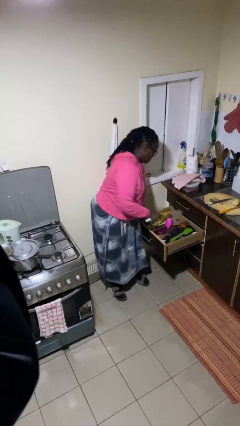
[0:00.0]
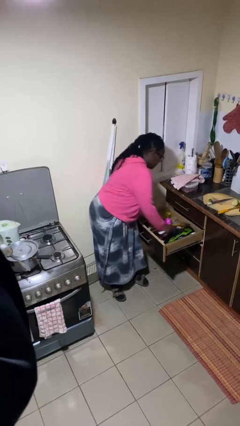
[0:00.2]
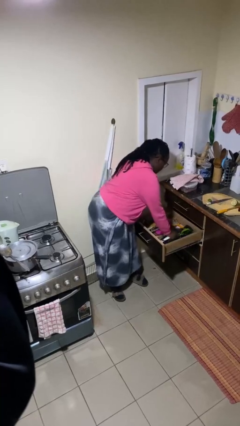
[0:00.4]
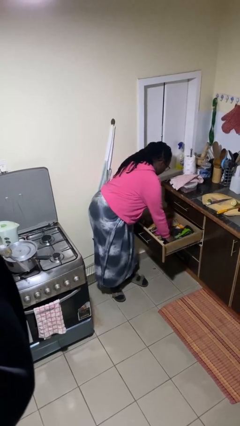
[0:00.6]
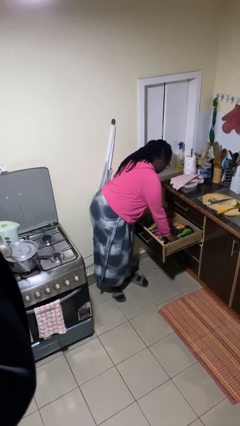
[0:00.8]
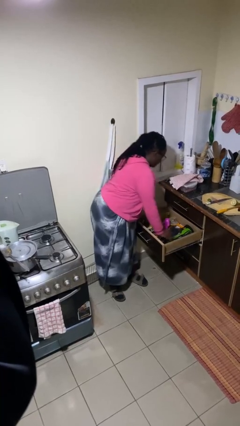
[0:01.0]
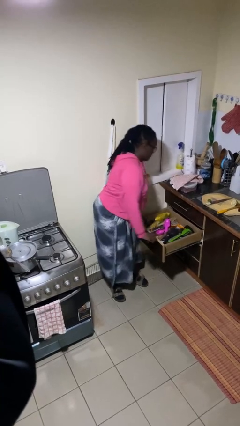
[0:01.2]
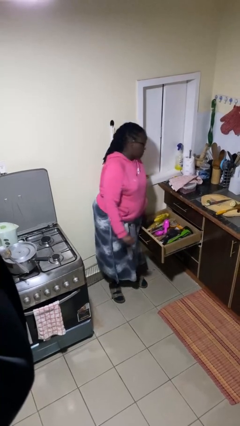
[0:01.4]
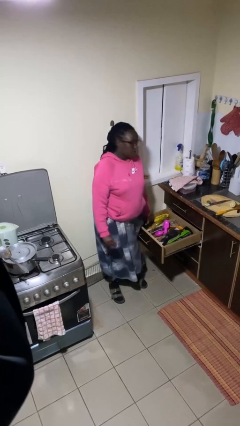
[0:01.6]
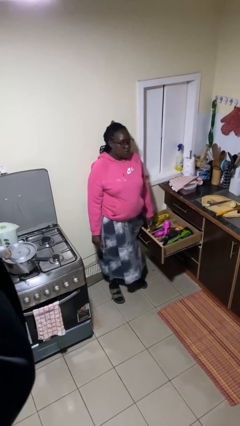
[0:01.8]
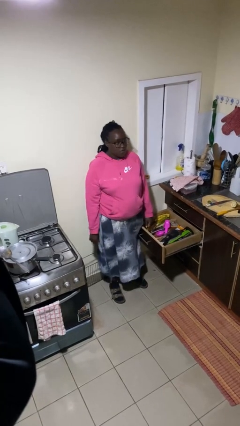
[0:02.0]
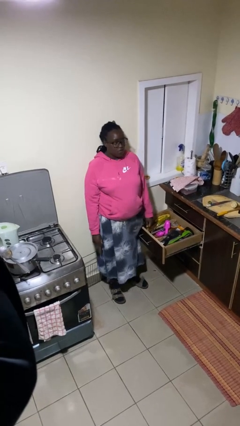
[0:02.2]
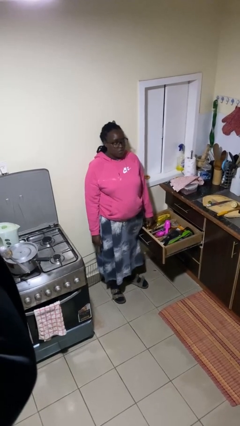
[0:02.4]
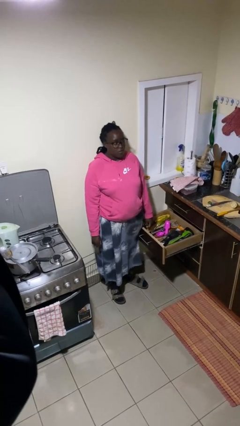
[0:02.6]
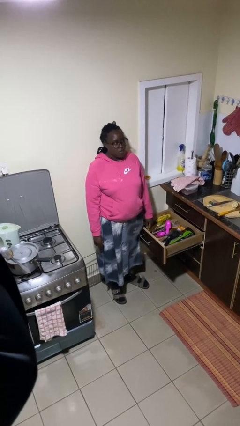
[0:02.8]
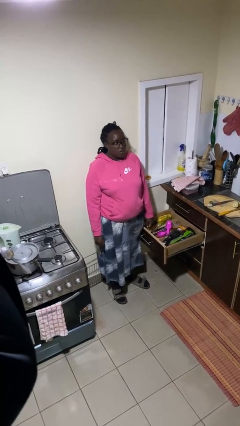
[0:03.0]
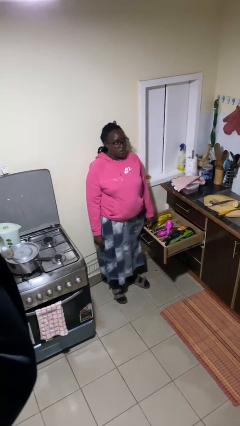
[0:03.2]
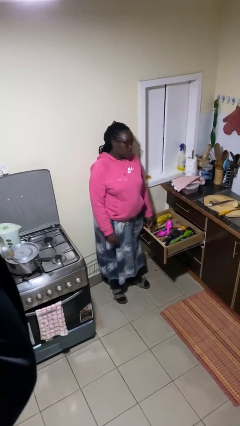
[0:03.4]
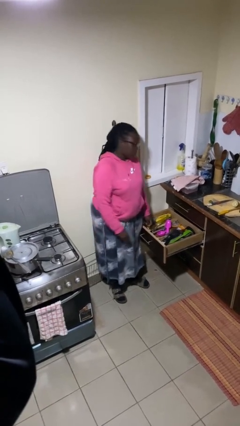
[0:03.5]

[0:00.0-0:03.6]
person puts object into kitchen drawer

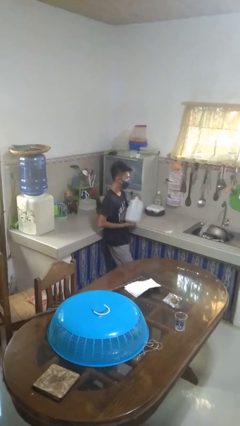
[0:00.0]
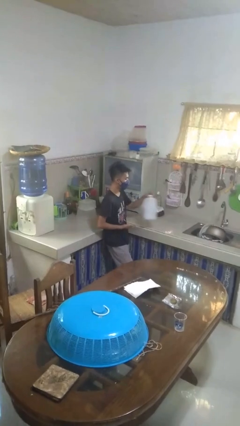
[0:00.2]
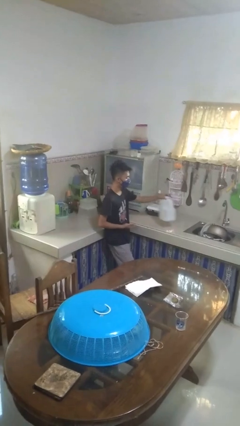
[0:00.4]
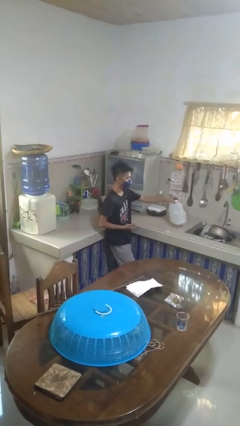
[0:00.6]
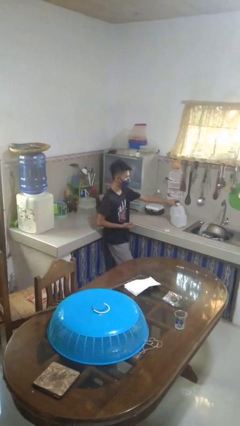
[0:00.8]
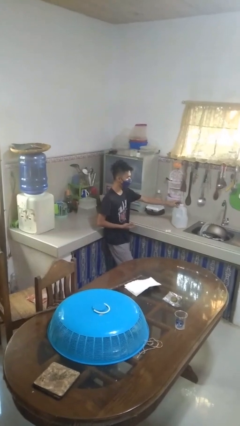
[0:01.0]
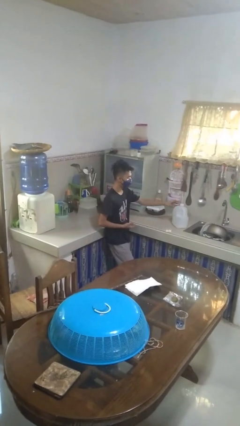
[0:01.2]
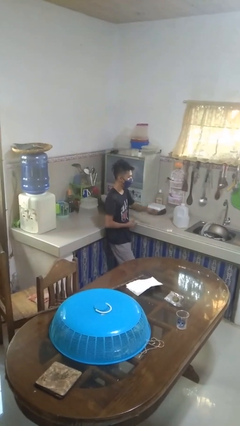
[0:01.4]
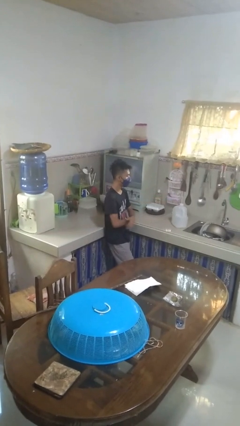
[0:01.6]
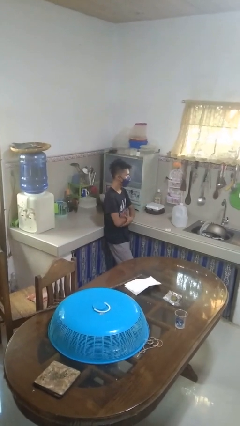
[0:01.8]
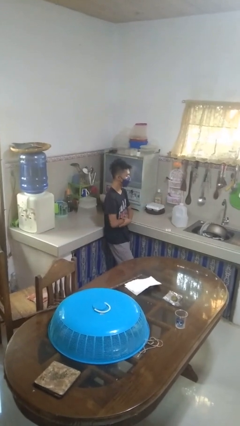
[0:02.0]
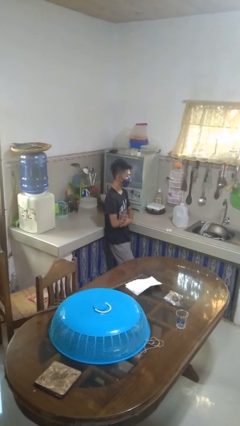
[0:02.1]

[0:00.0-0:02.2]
person puts down object on countertop

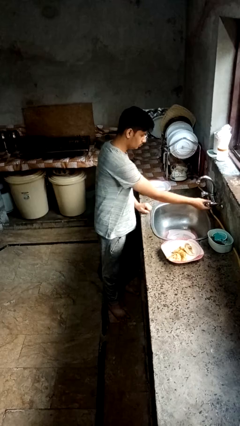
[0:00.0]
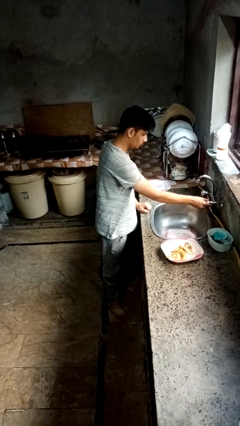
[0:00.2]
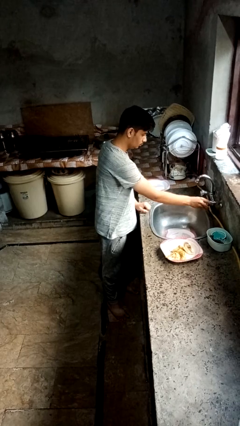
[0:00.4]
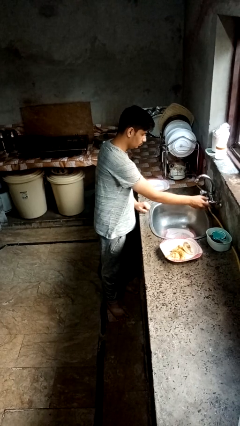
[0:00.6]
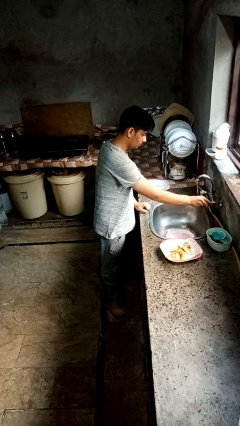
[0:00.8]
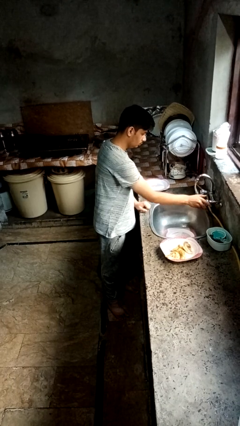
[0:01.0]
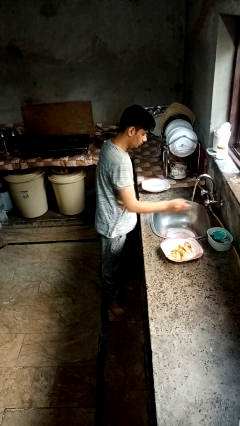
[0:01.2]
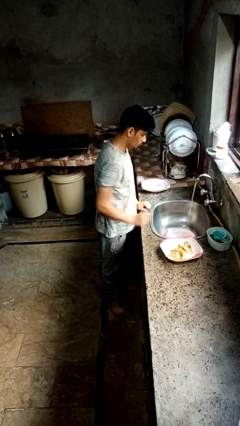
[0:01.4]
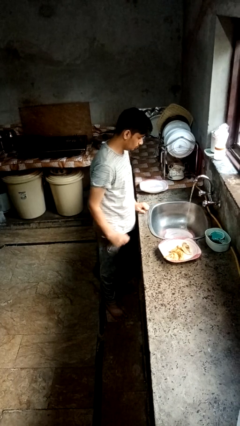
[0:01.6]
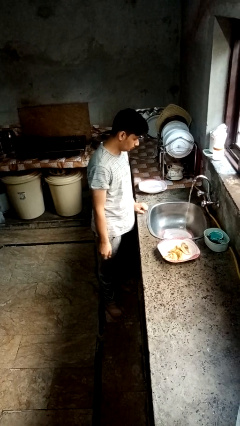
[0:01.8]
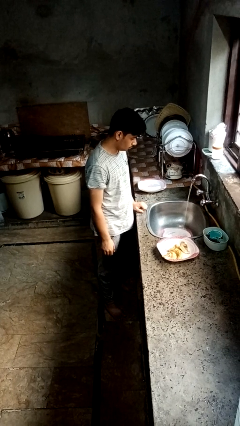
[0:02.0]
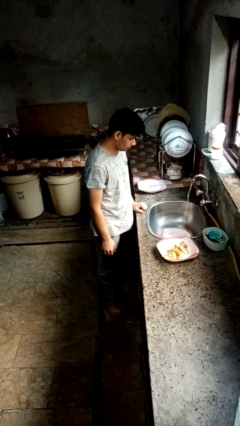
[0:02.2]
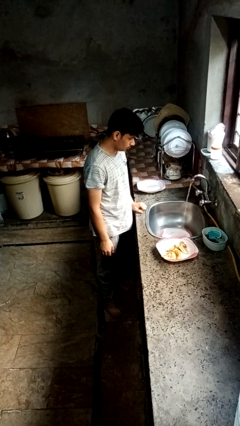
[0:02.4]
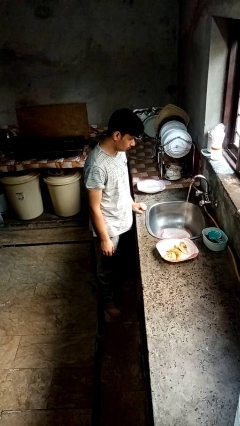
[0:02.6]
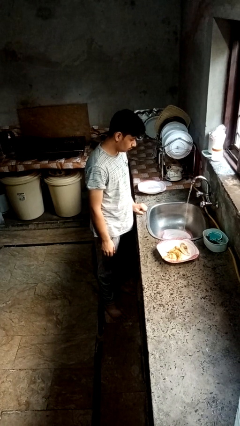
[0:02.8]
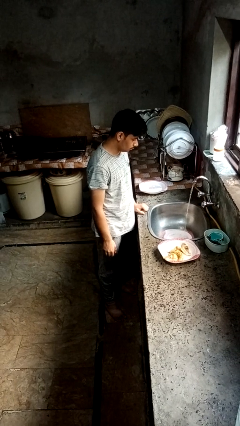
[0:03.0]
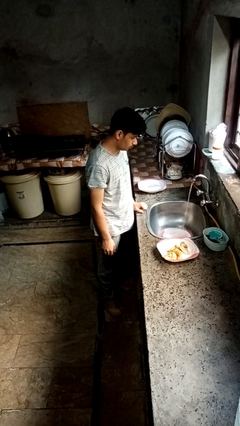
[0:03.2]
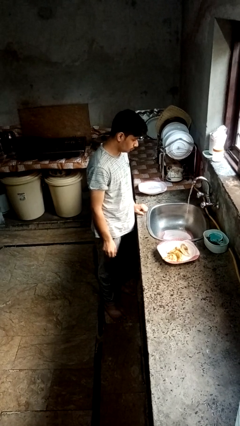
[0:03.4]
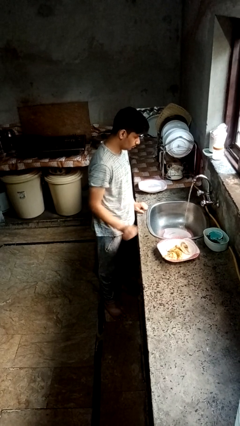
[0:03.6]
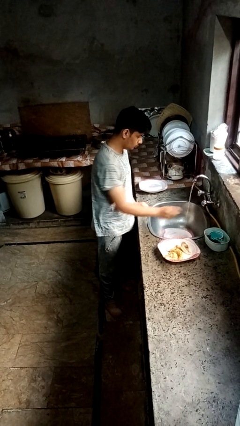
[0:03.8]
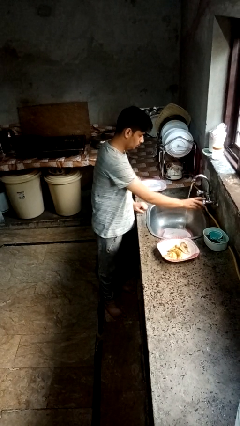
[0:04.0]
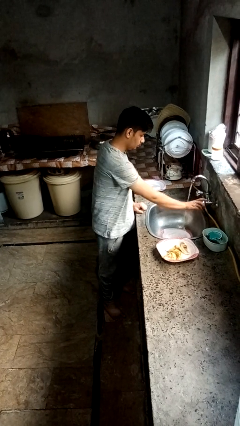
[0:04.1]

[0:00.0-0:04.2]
person opens dishwasher

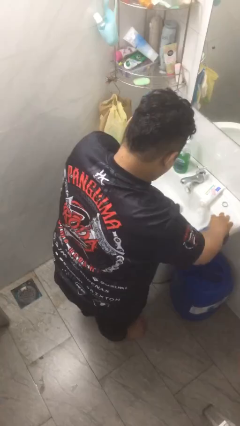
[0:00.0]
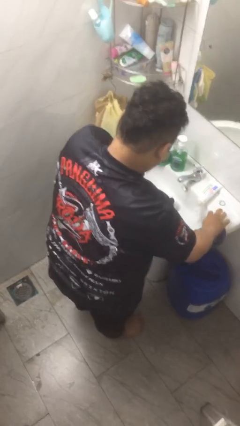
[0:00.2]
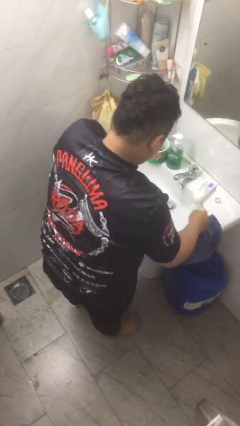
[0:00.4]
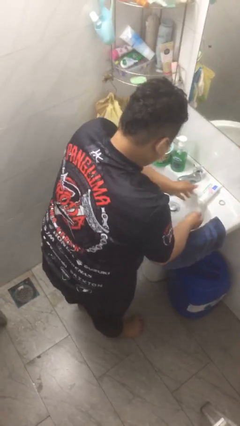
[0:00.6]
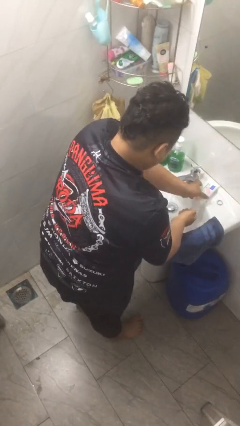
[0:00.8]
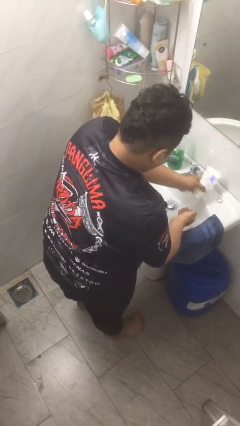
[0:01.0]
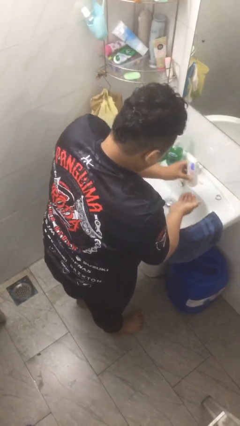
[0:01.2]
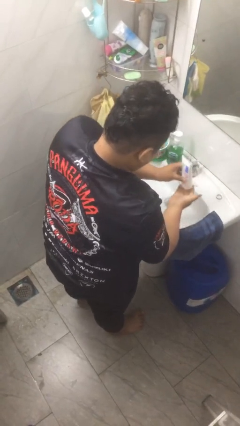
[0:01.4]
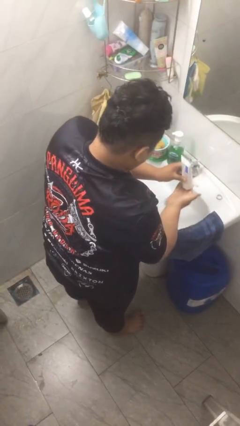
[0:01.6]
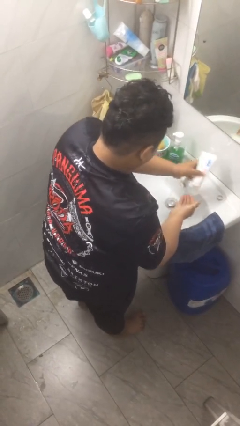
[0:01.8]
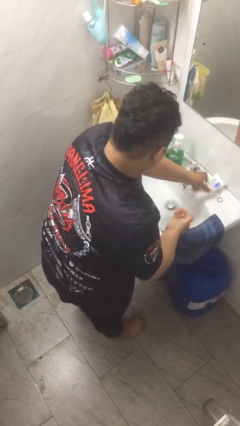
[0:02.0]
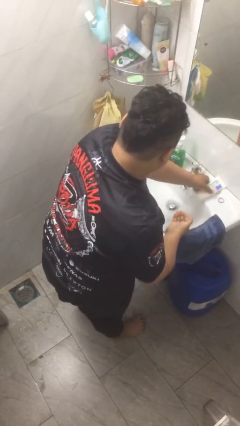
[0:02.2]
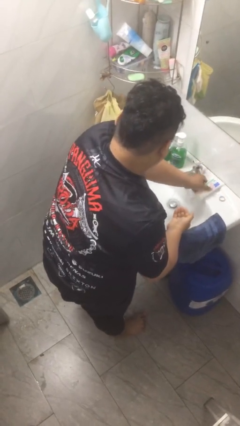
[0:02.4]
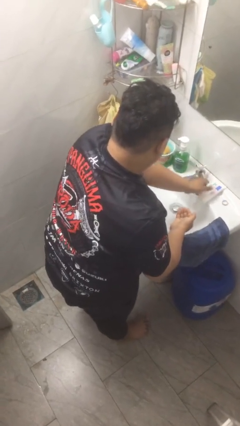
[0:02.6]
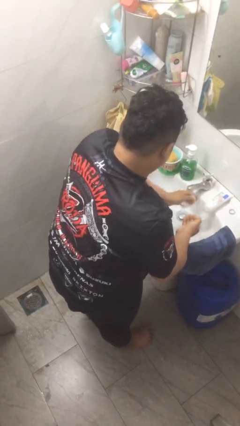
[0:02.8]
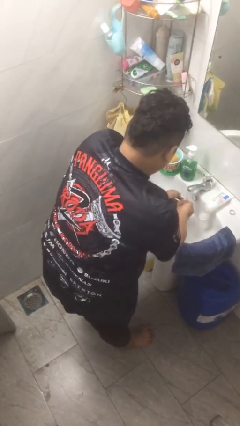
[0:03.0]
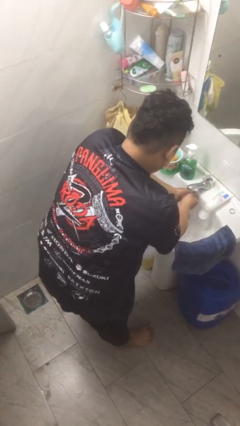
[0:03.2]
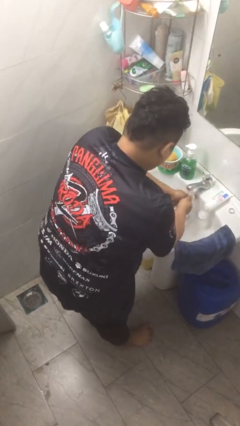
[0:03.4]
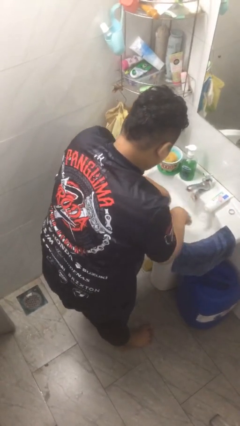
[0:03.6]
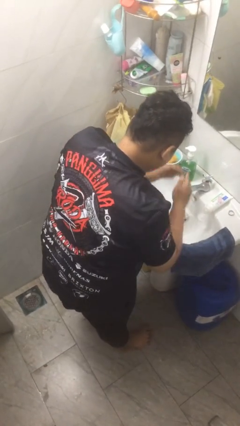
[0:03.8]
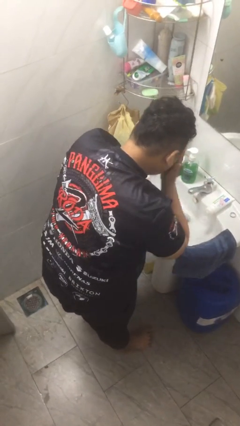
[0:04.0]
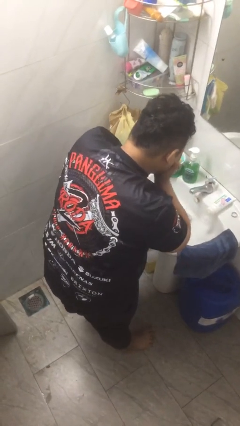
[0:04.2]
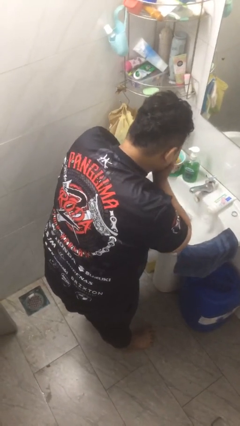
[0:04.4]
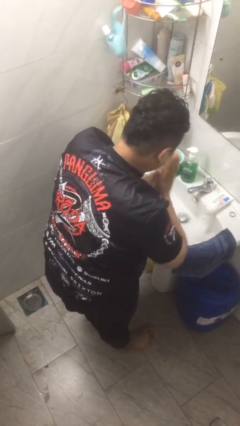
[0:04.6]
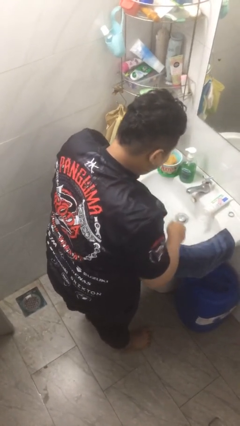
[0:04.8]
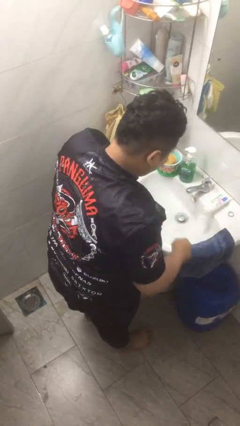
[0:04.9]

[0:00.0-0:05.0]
person washes face

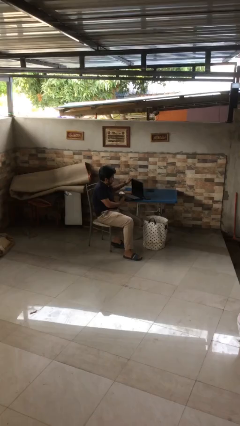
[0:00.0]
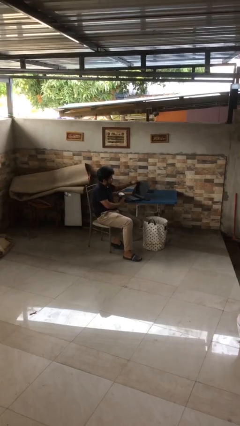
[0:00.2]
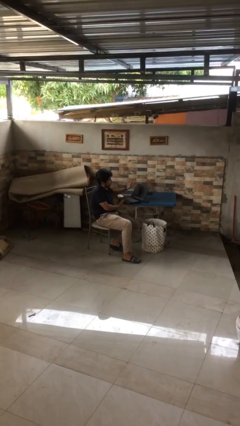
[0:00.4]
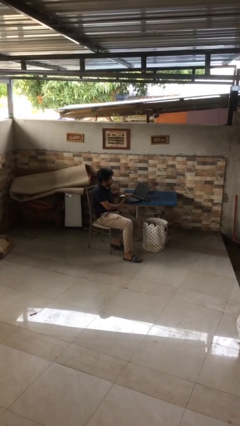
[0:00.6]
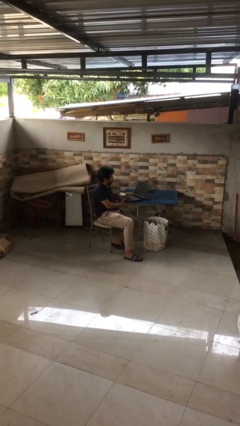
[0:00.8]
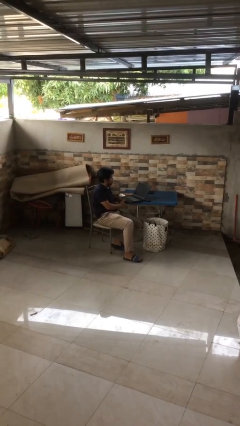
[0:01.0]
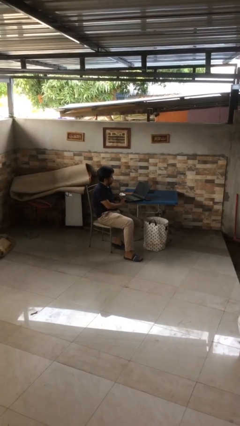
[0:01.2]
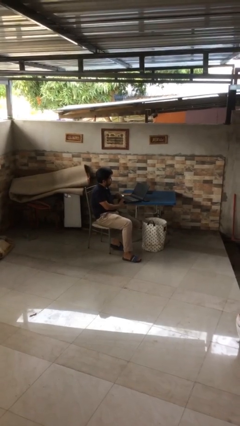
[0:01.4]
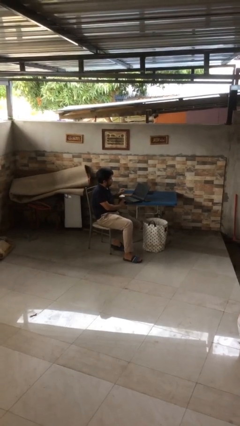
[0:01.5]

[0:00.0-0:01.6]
person opens laptop

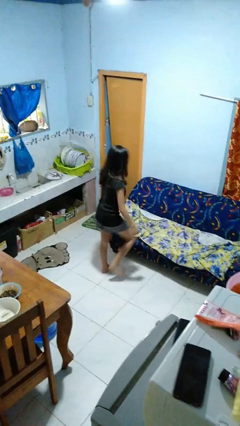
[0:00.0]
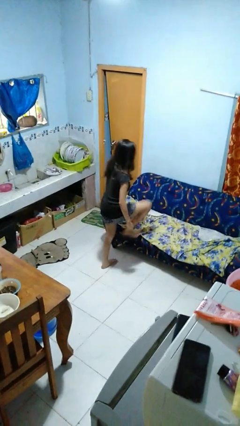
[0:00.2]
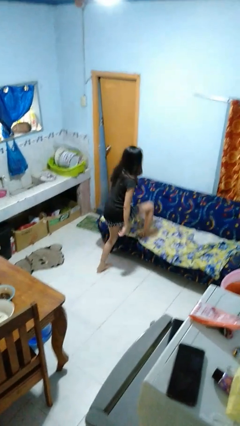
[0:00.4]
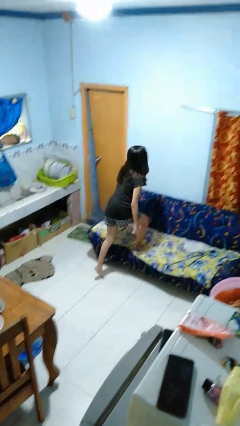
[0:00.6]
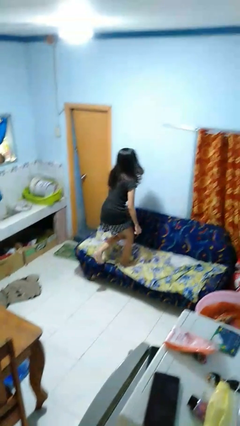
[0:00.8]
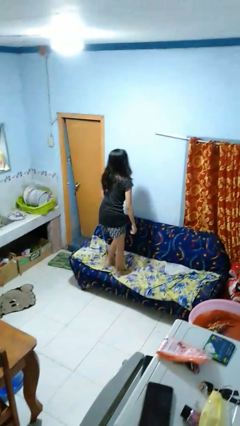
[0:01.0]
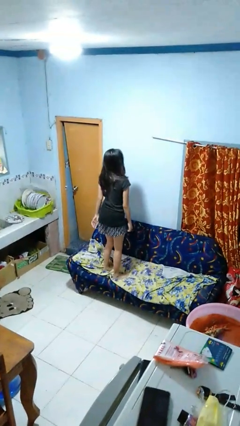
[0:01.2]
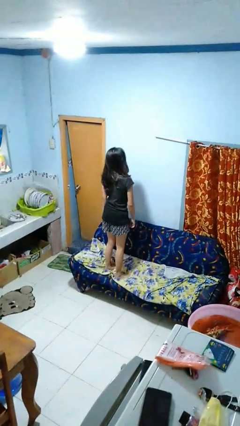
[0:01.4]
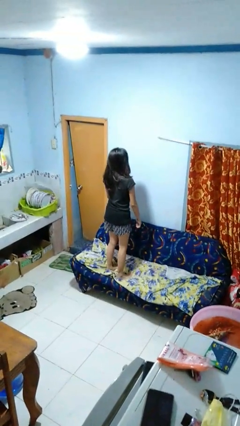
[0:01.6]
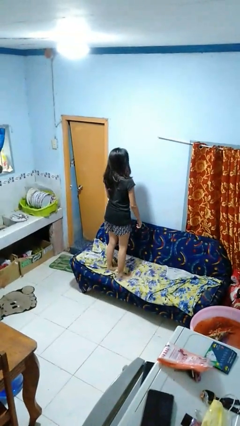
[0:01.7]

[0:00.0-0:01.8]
person climbs on couch
